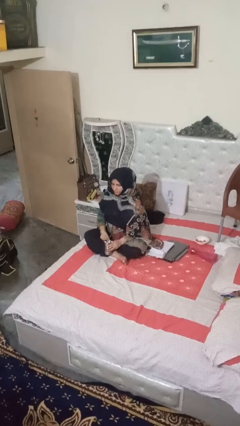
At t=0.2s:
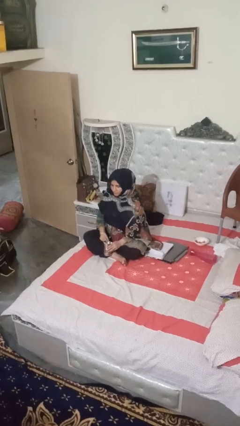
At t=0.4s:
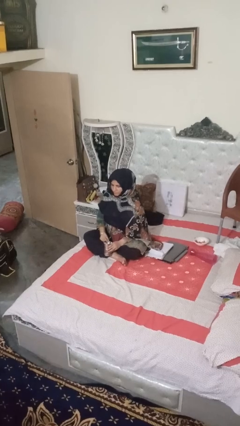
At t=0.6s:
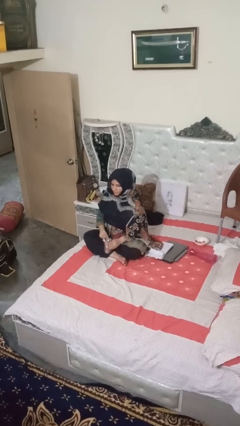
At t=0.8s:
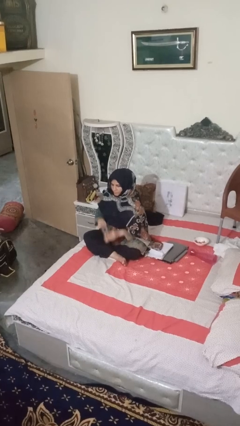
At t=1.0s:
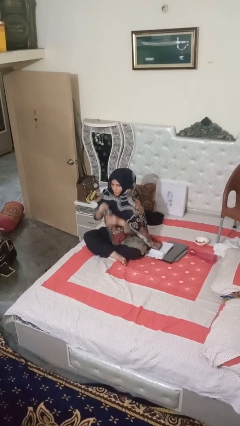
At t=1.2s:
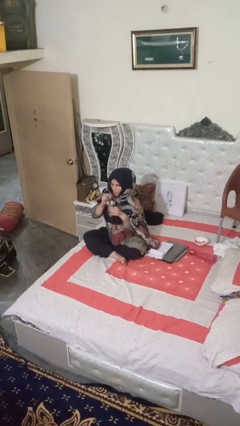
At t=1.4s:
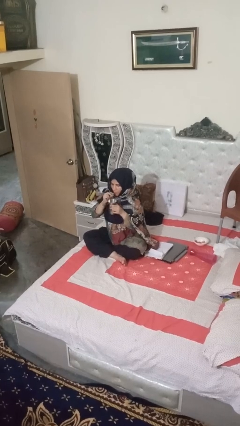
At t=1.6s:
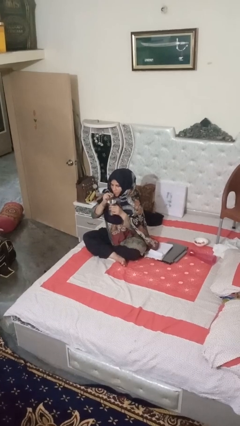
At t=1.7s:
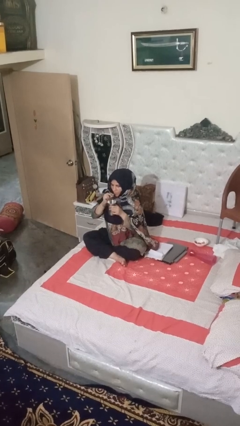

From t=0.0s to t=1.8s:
person drinks from straw

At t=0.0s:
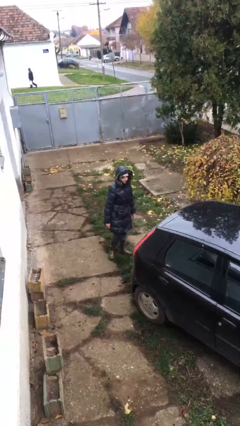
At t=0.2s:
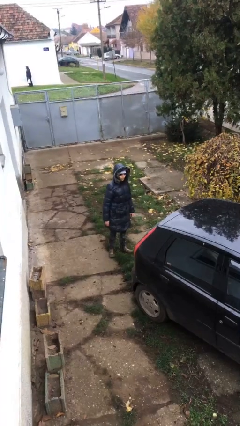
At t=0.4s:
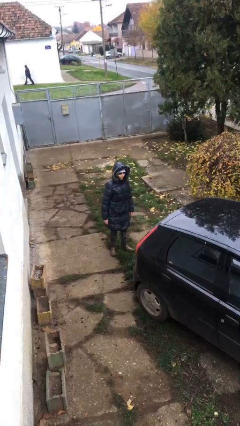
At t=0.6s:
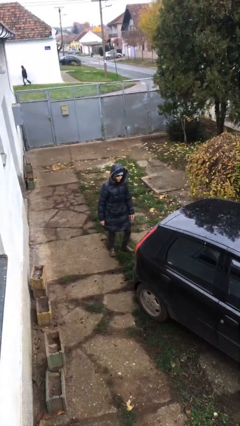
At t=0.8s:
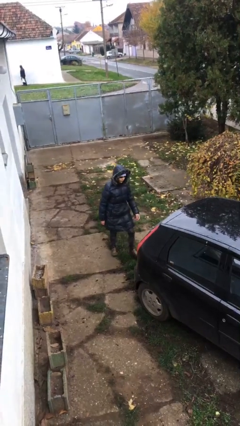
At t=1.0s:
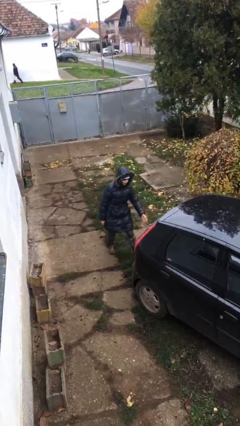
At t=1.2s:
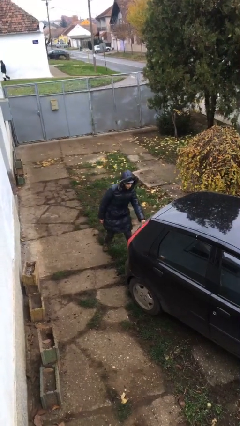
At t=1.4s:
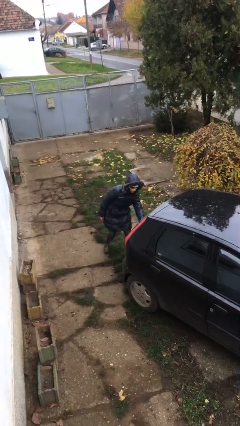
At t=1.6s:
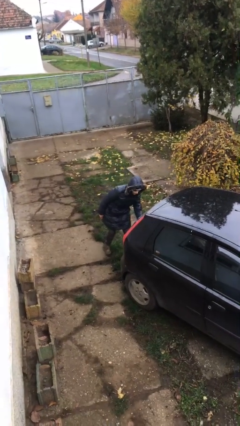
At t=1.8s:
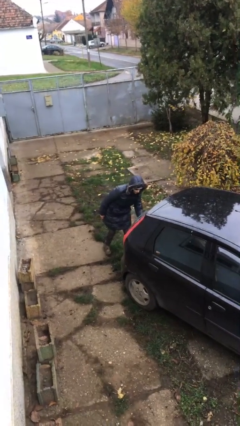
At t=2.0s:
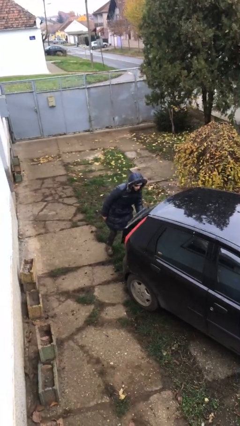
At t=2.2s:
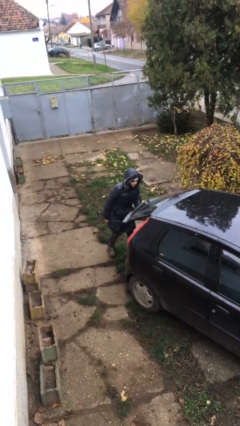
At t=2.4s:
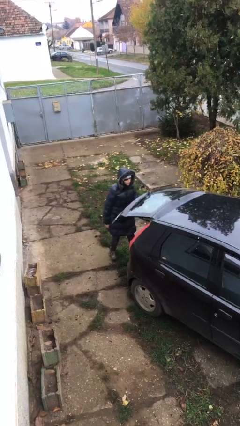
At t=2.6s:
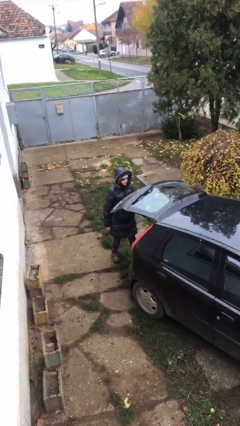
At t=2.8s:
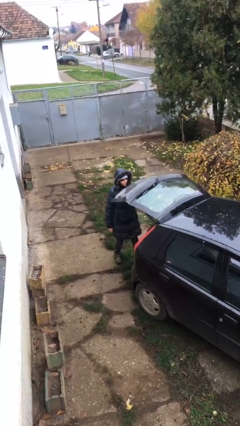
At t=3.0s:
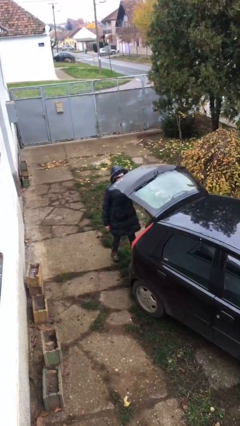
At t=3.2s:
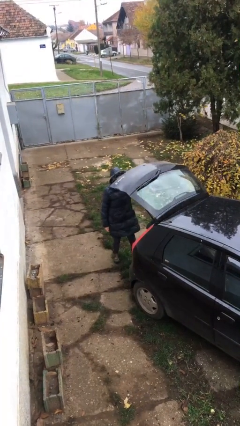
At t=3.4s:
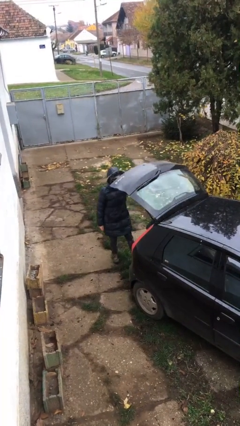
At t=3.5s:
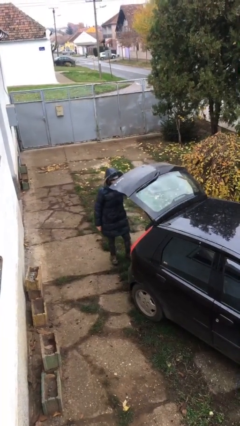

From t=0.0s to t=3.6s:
person opens car trunk

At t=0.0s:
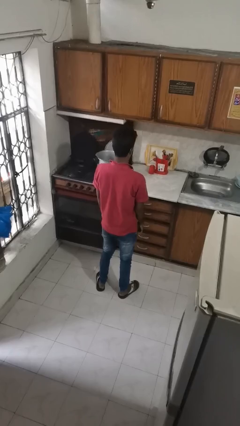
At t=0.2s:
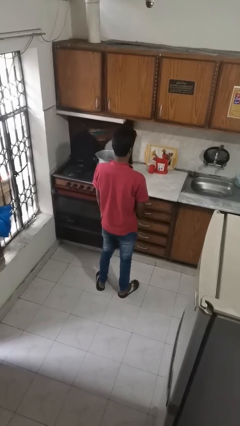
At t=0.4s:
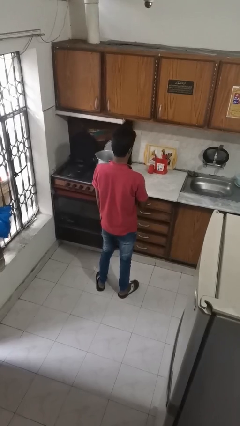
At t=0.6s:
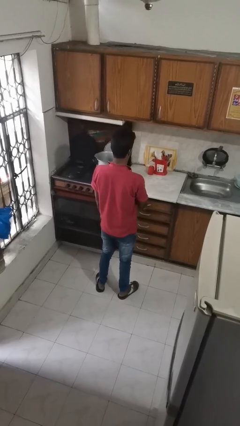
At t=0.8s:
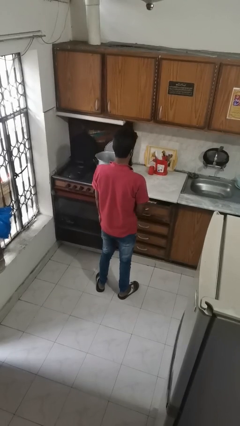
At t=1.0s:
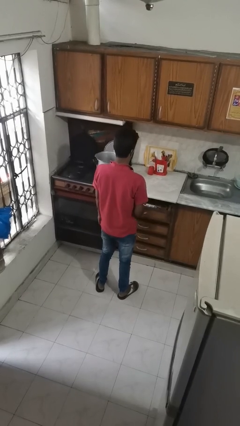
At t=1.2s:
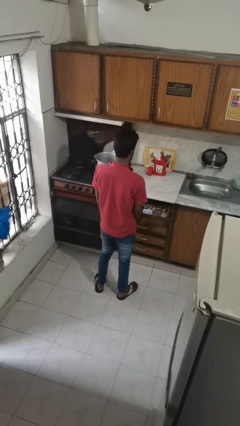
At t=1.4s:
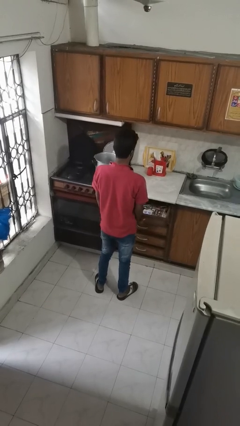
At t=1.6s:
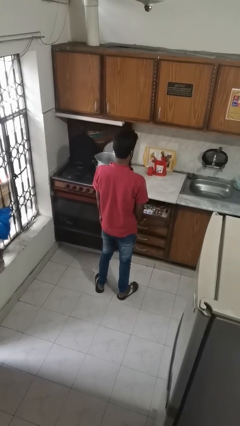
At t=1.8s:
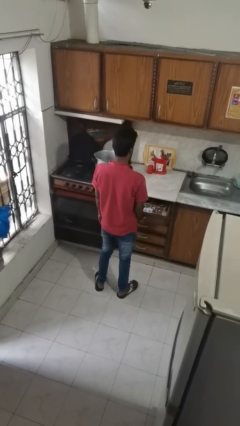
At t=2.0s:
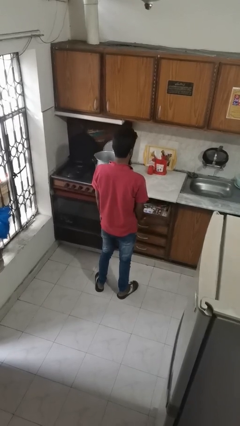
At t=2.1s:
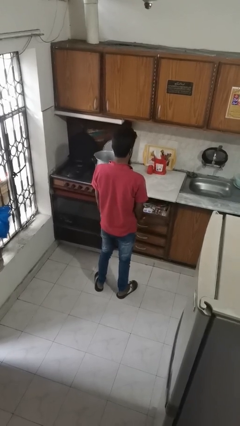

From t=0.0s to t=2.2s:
person opens kitchen drawer

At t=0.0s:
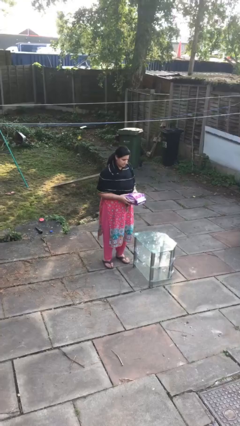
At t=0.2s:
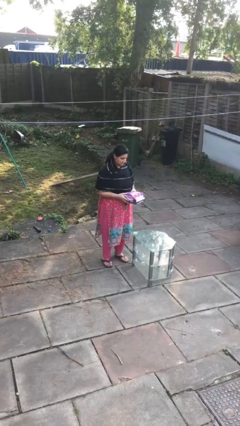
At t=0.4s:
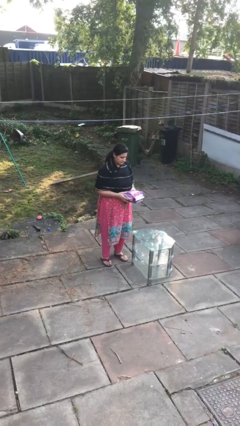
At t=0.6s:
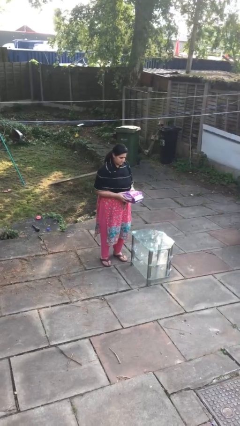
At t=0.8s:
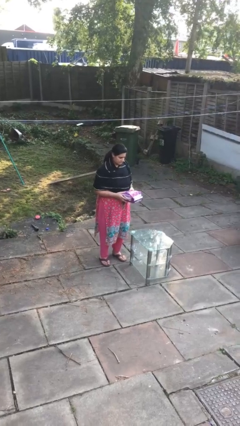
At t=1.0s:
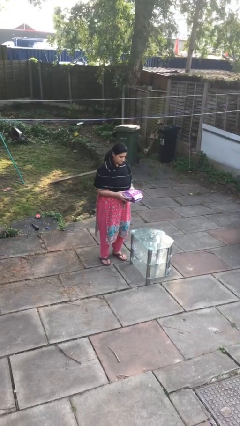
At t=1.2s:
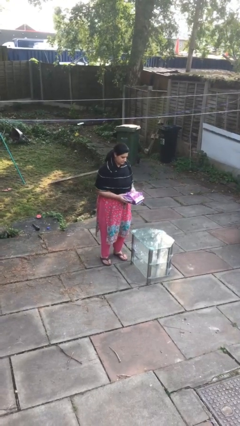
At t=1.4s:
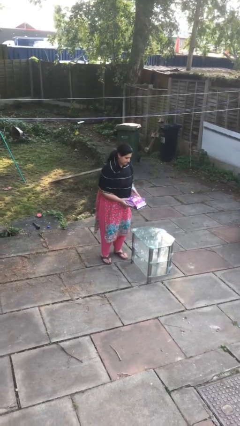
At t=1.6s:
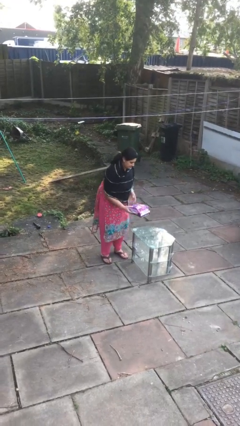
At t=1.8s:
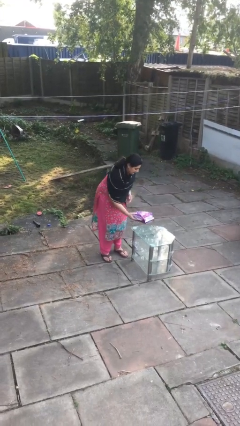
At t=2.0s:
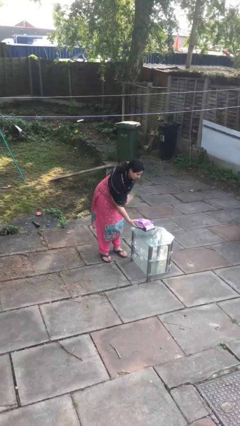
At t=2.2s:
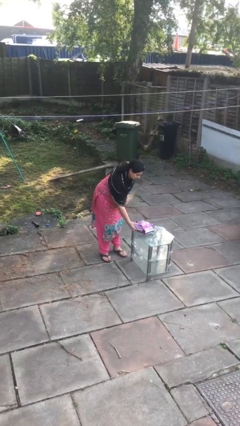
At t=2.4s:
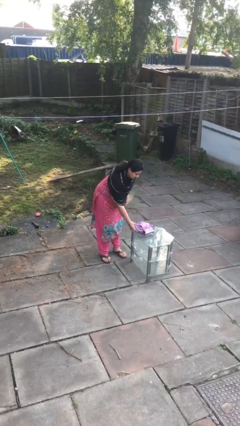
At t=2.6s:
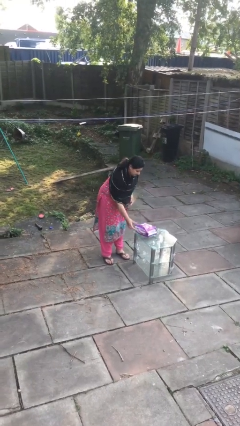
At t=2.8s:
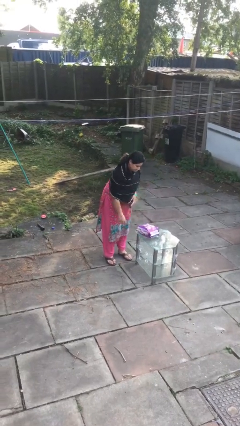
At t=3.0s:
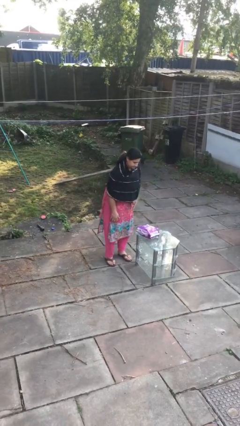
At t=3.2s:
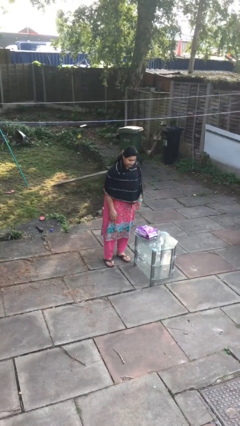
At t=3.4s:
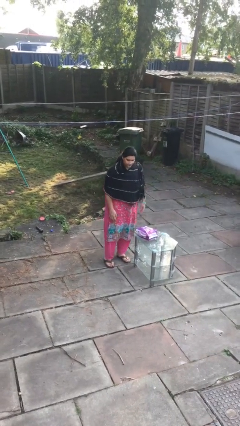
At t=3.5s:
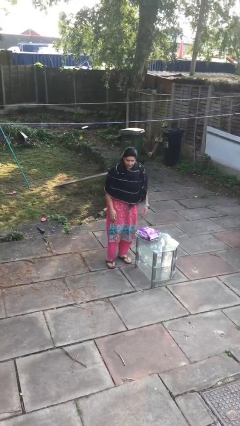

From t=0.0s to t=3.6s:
person puts down object on table

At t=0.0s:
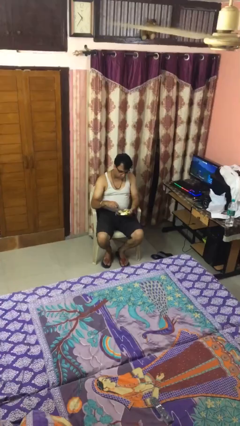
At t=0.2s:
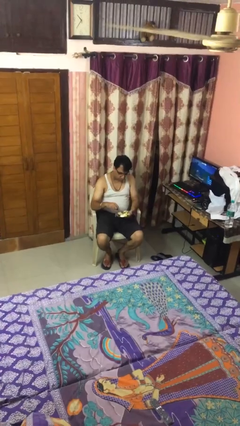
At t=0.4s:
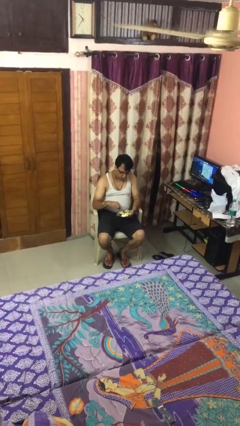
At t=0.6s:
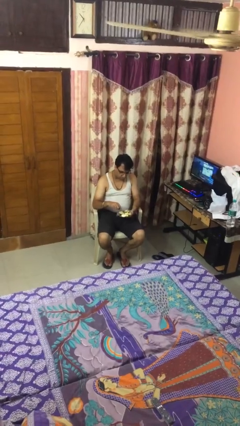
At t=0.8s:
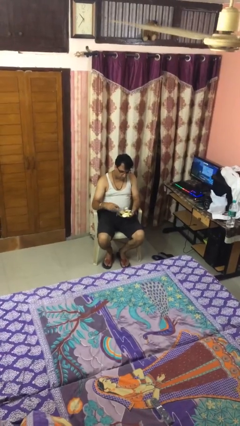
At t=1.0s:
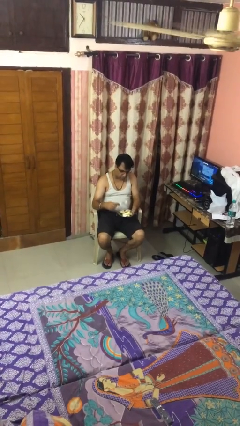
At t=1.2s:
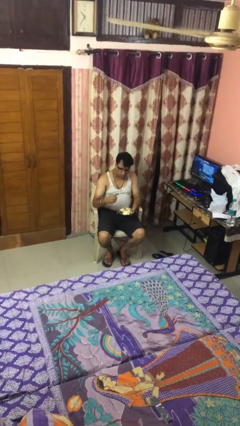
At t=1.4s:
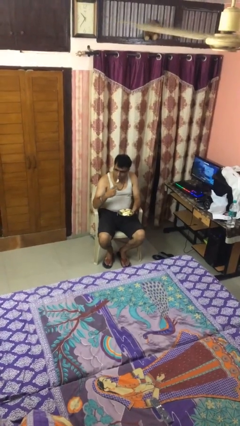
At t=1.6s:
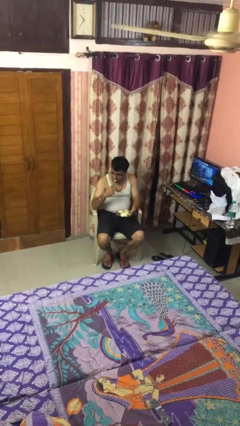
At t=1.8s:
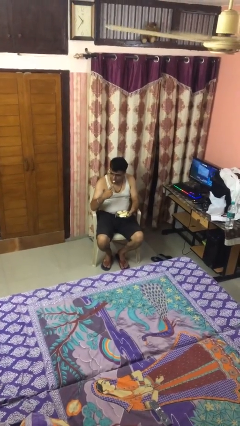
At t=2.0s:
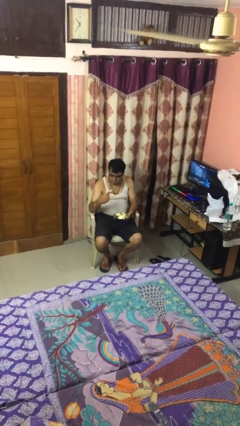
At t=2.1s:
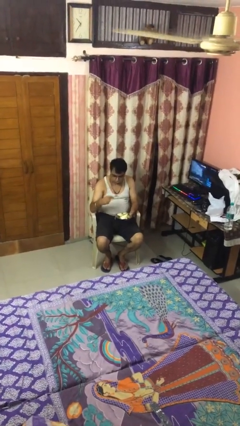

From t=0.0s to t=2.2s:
person eats with utensil

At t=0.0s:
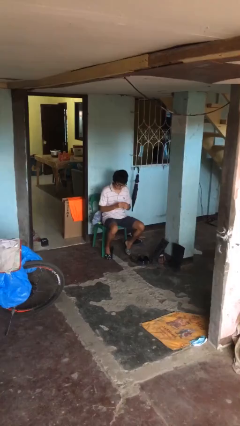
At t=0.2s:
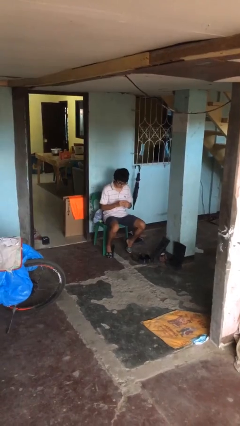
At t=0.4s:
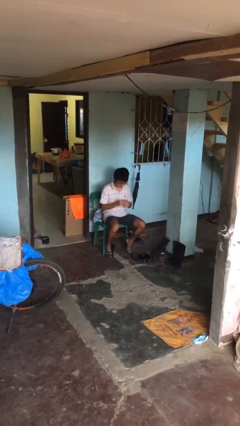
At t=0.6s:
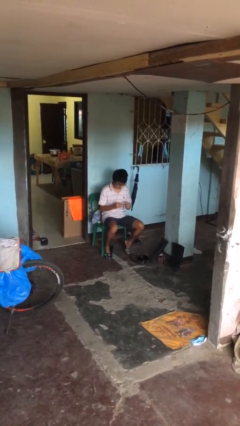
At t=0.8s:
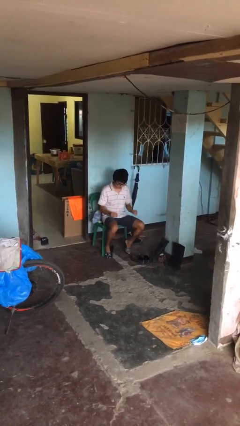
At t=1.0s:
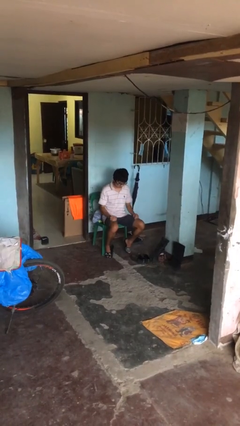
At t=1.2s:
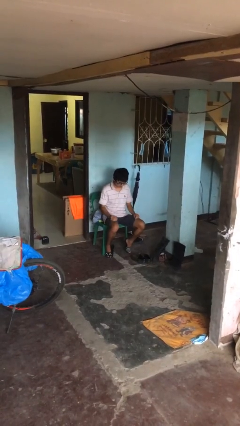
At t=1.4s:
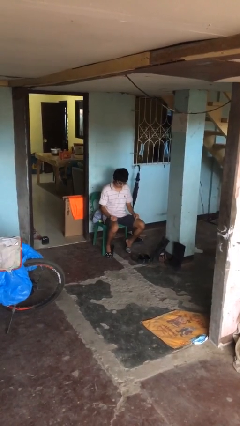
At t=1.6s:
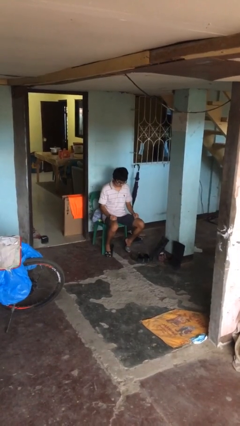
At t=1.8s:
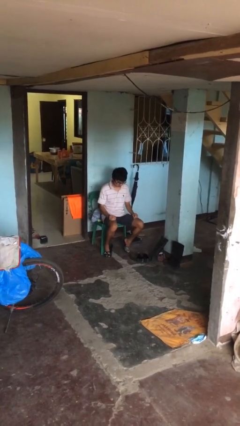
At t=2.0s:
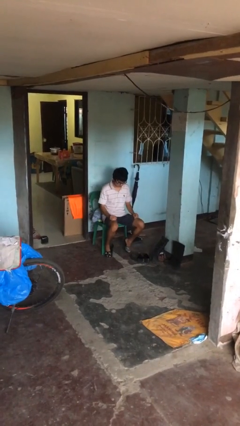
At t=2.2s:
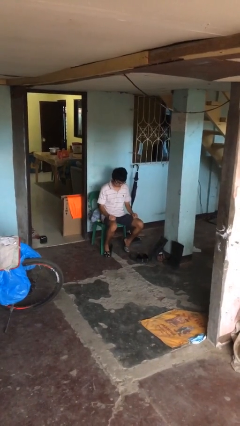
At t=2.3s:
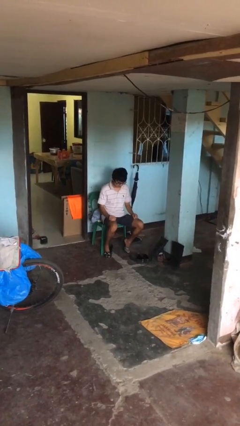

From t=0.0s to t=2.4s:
person takes off ring

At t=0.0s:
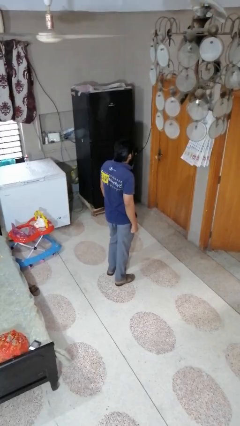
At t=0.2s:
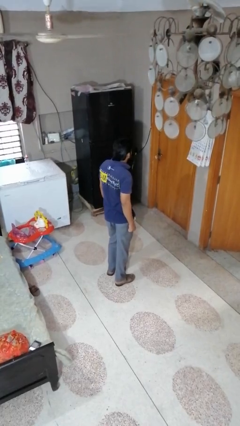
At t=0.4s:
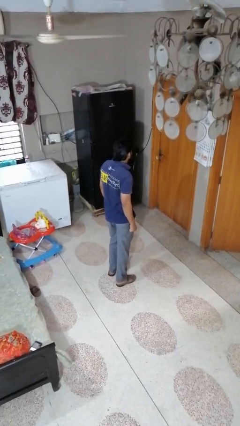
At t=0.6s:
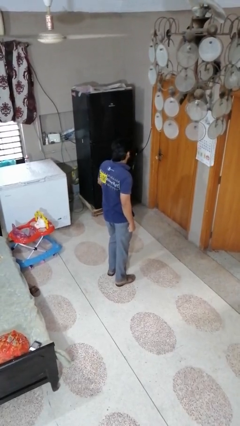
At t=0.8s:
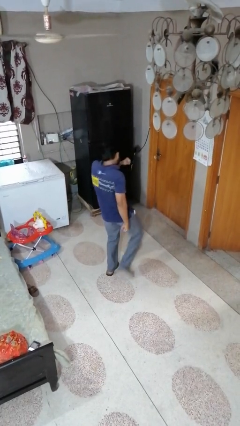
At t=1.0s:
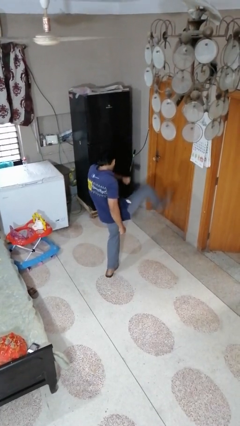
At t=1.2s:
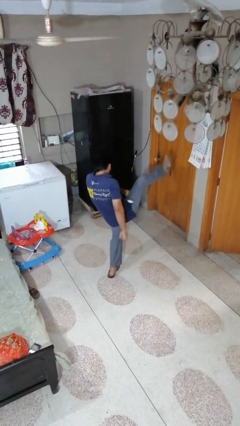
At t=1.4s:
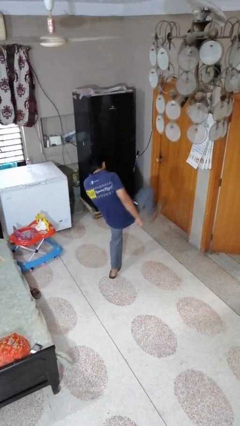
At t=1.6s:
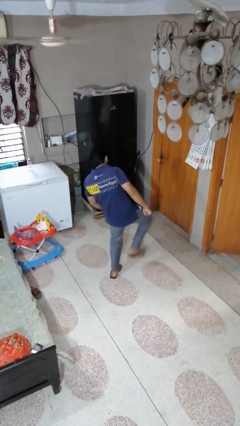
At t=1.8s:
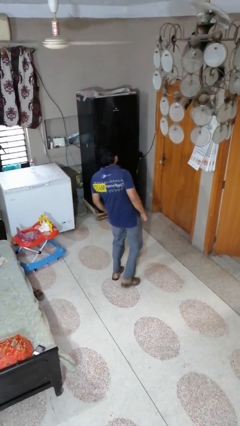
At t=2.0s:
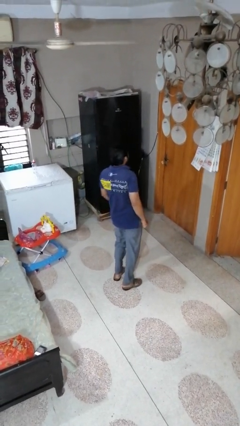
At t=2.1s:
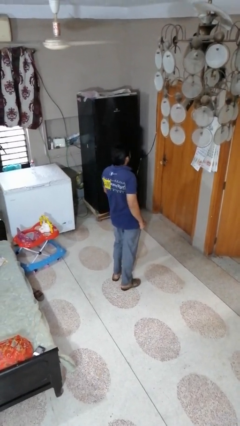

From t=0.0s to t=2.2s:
person karate kicks
